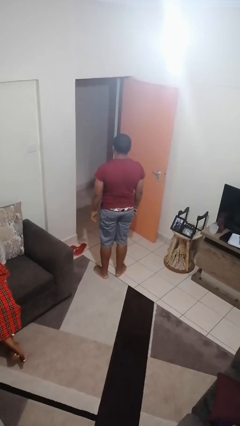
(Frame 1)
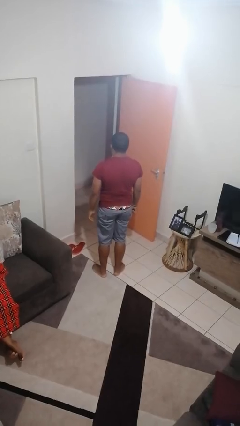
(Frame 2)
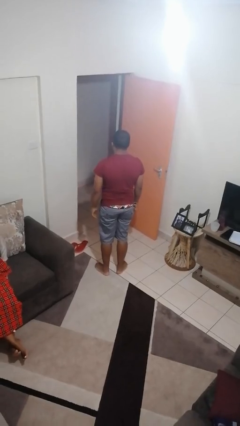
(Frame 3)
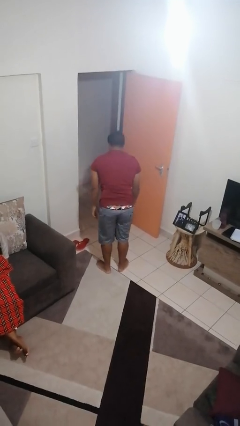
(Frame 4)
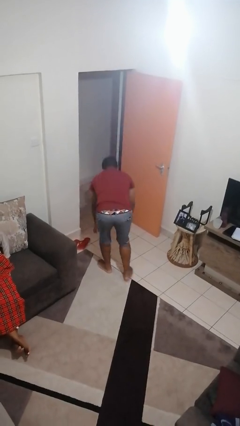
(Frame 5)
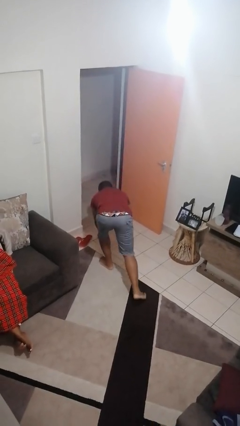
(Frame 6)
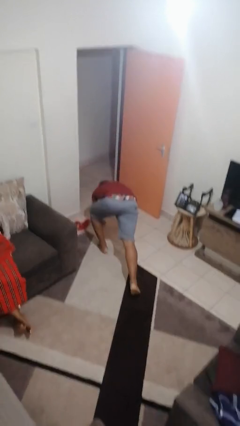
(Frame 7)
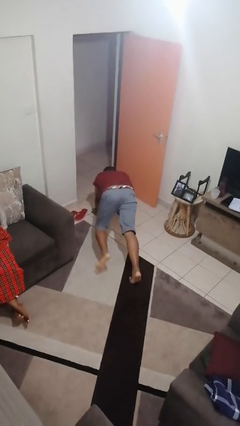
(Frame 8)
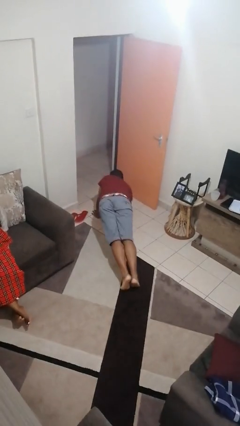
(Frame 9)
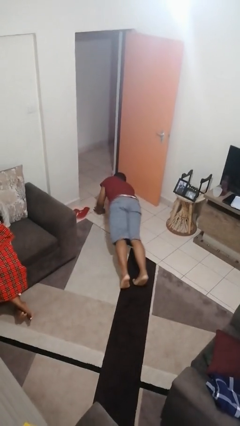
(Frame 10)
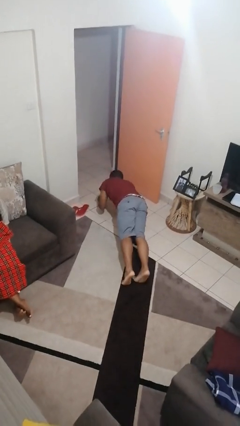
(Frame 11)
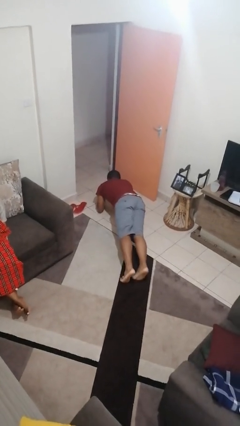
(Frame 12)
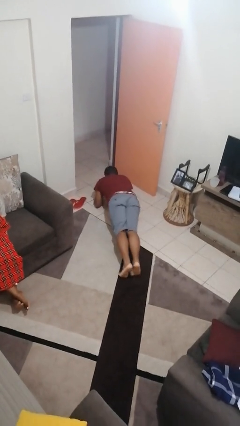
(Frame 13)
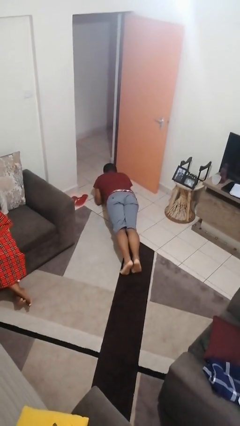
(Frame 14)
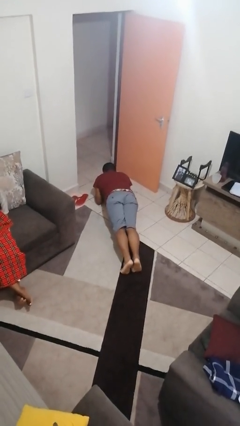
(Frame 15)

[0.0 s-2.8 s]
person exercises with plank

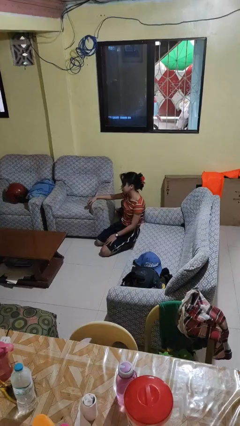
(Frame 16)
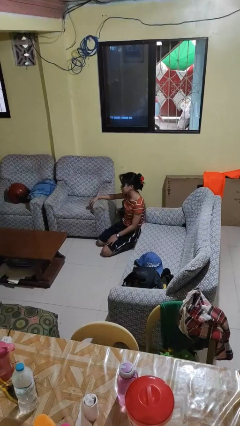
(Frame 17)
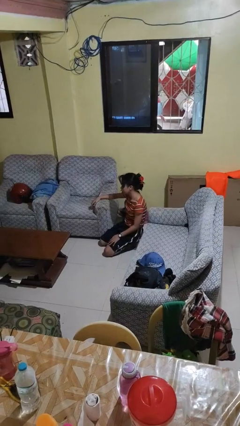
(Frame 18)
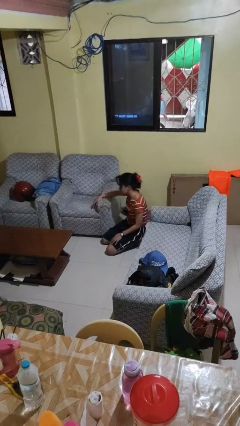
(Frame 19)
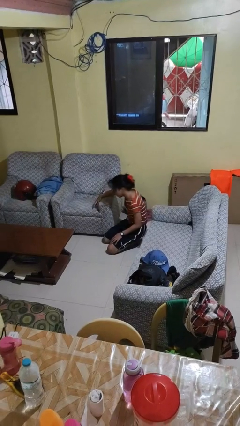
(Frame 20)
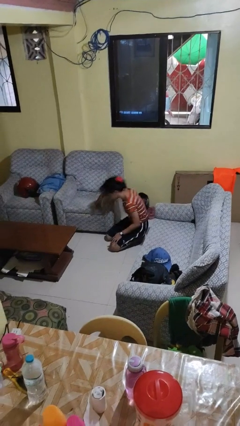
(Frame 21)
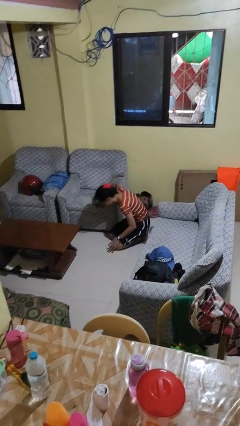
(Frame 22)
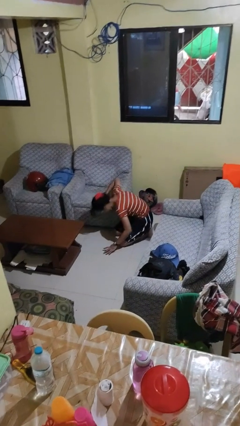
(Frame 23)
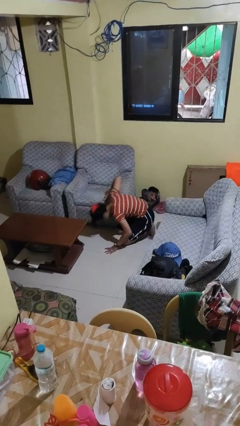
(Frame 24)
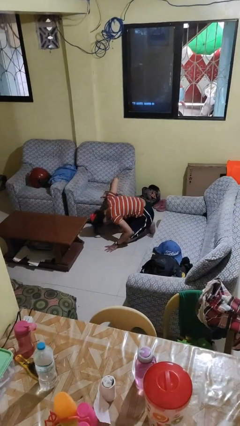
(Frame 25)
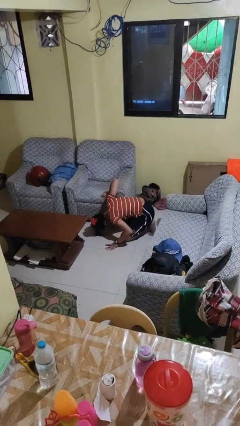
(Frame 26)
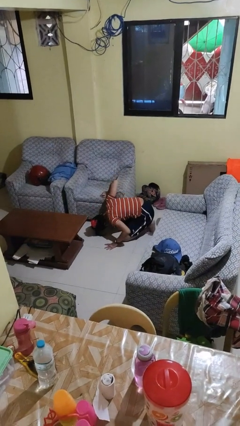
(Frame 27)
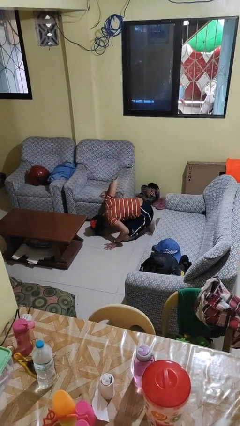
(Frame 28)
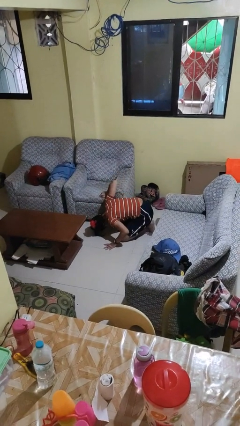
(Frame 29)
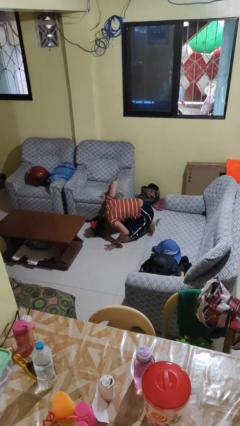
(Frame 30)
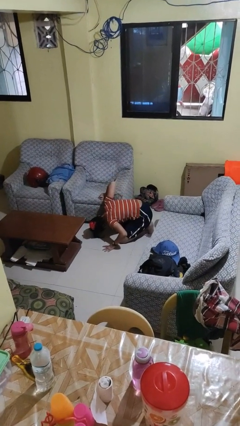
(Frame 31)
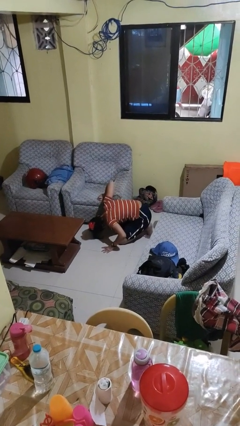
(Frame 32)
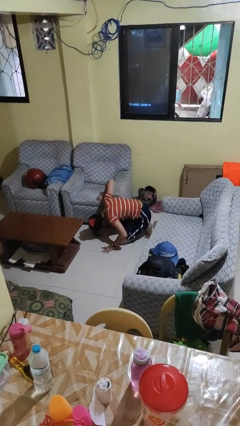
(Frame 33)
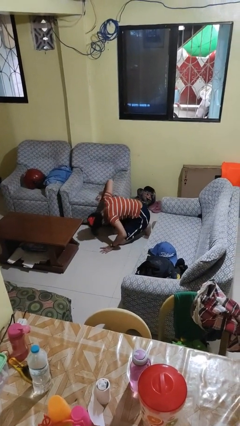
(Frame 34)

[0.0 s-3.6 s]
person searches under couch

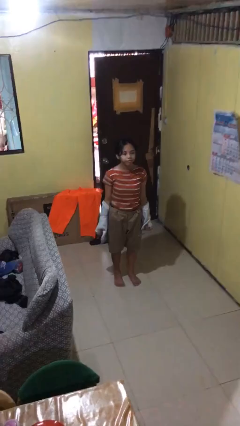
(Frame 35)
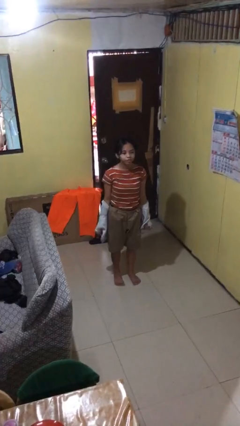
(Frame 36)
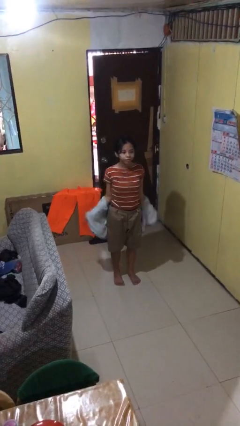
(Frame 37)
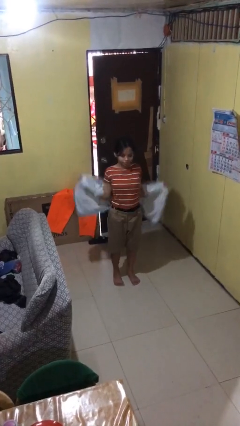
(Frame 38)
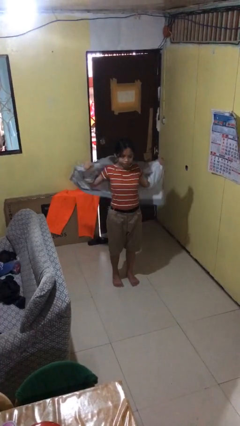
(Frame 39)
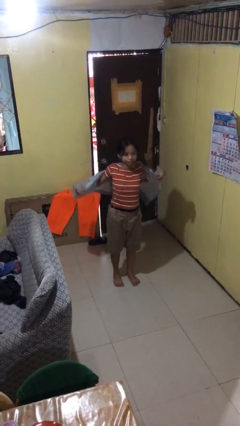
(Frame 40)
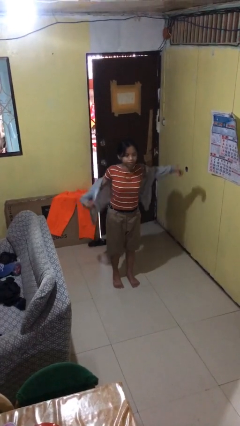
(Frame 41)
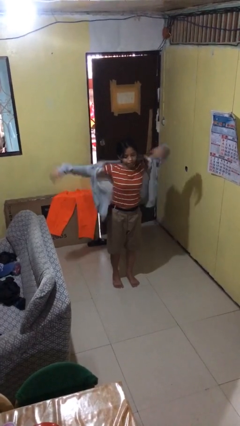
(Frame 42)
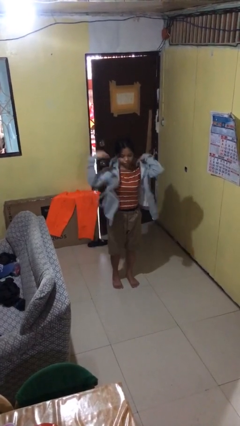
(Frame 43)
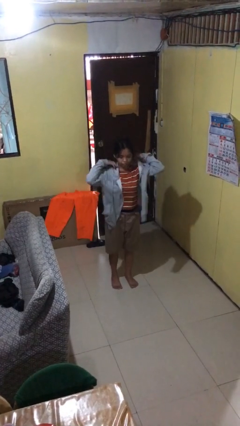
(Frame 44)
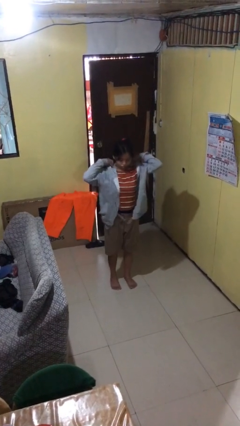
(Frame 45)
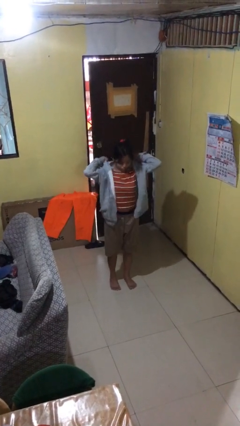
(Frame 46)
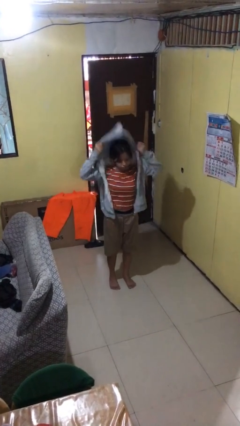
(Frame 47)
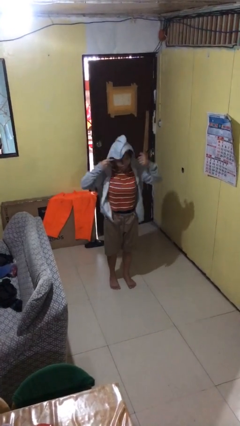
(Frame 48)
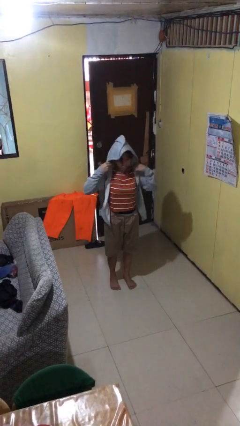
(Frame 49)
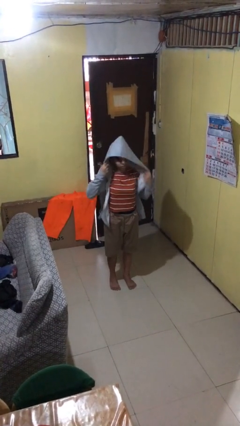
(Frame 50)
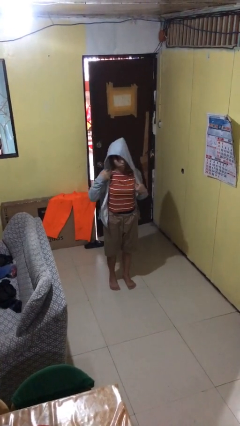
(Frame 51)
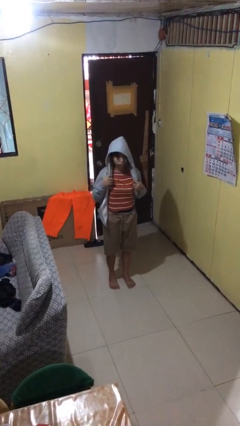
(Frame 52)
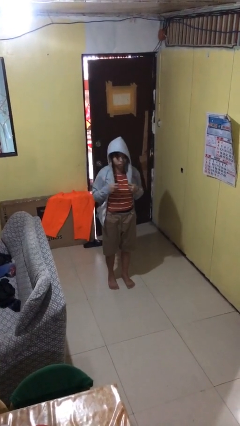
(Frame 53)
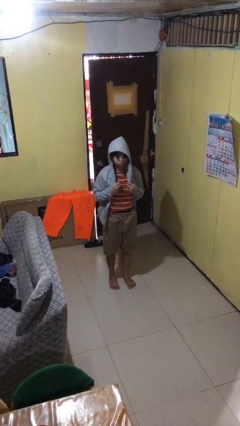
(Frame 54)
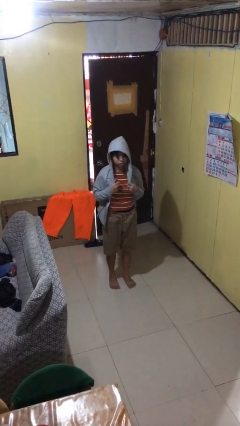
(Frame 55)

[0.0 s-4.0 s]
person puts on hoodie

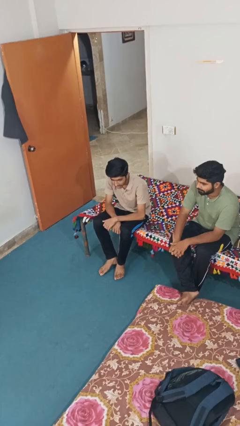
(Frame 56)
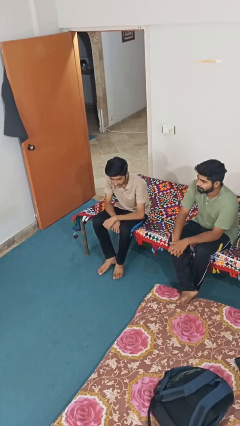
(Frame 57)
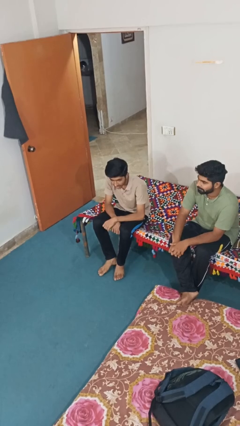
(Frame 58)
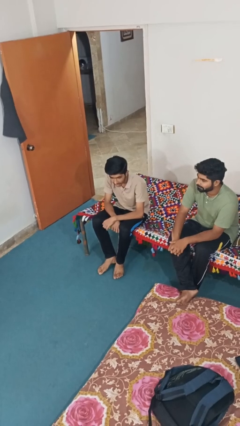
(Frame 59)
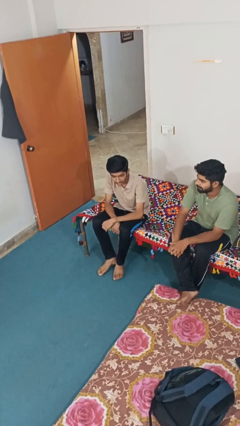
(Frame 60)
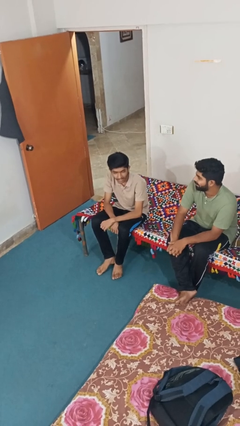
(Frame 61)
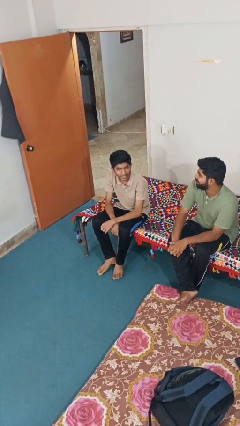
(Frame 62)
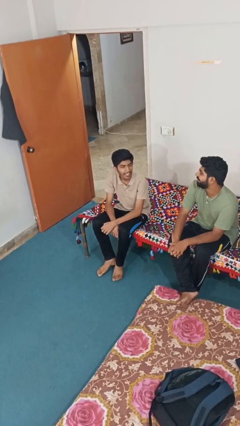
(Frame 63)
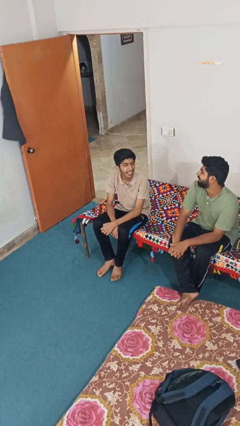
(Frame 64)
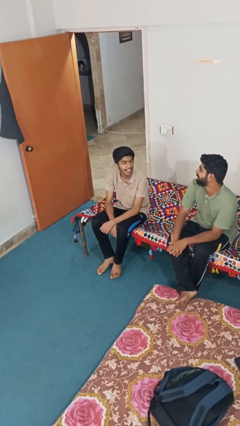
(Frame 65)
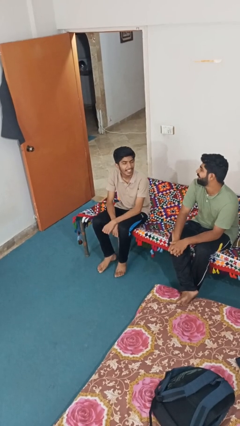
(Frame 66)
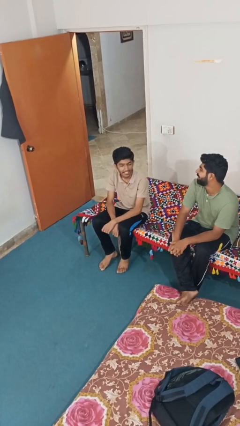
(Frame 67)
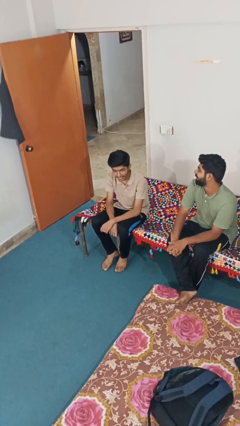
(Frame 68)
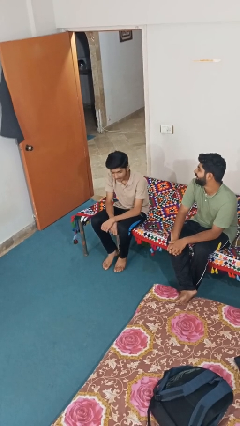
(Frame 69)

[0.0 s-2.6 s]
person laughs with person

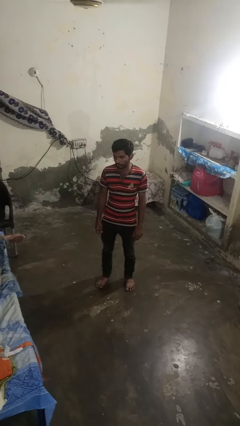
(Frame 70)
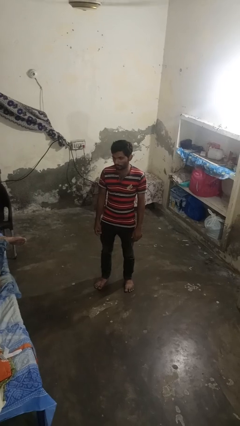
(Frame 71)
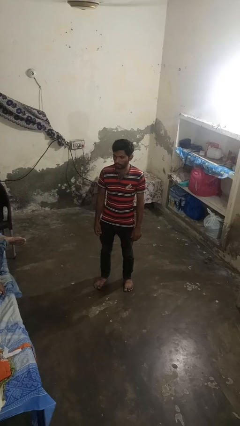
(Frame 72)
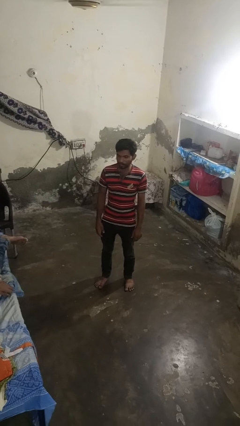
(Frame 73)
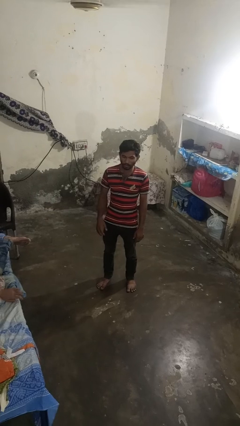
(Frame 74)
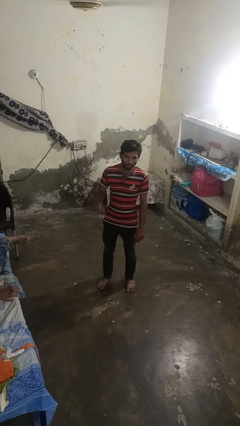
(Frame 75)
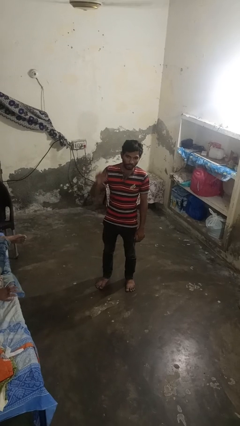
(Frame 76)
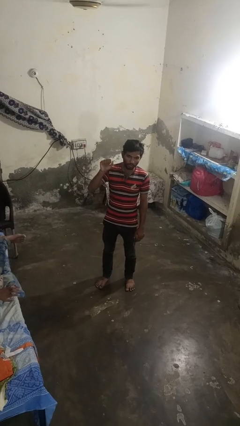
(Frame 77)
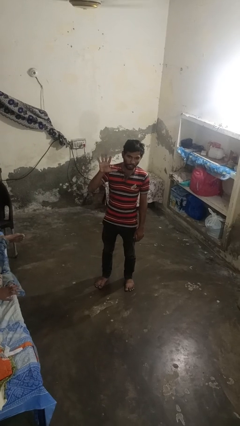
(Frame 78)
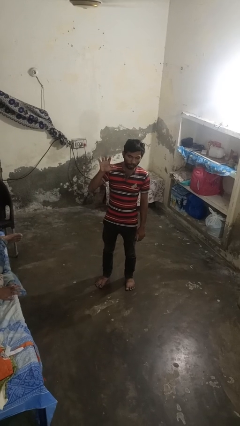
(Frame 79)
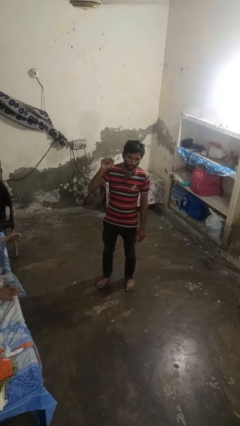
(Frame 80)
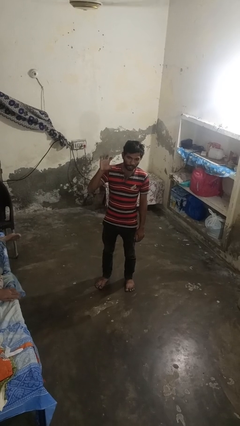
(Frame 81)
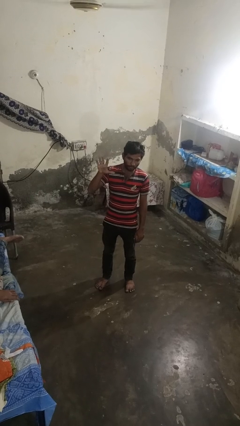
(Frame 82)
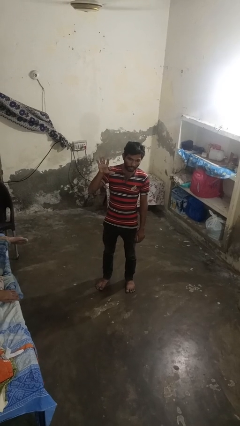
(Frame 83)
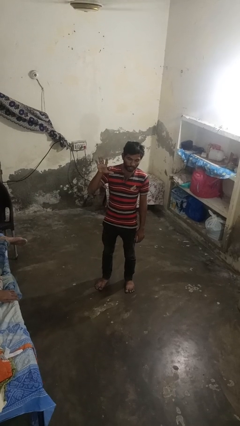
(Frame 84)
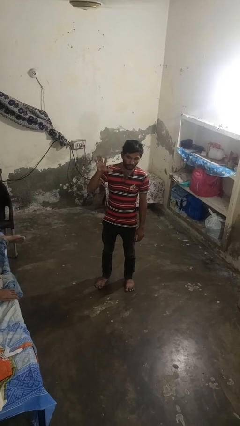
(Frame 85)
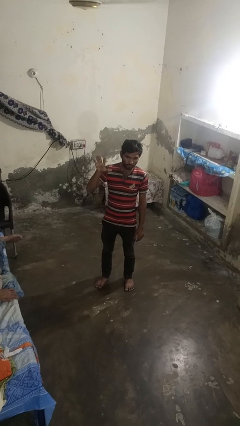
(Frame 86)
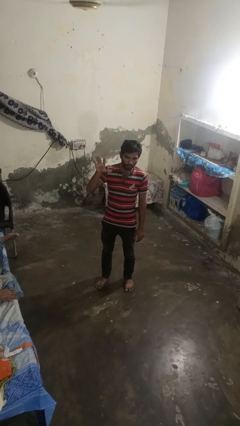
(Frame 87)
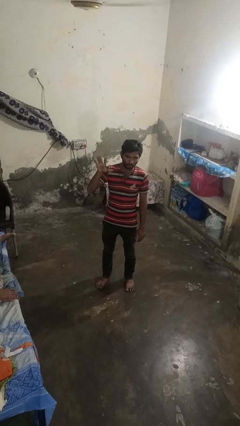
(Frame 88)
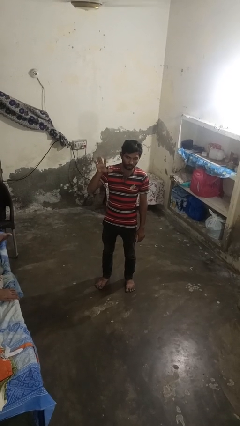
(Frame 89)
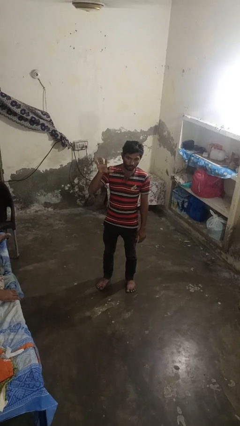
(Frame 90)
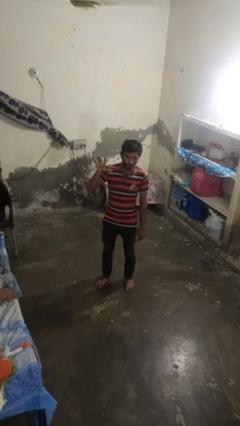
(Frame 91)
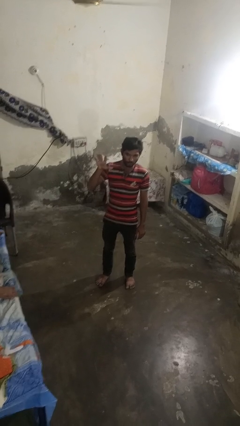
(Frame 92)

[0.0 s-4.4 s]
person gestures number five
